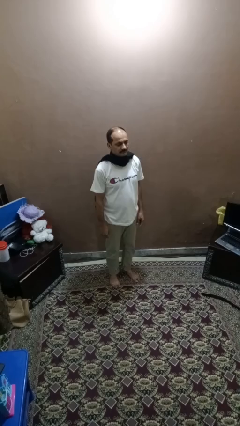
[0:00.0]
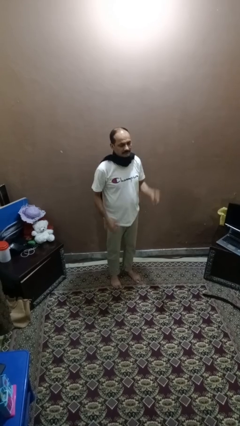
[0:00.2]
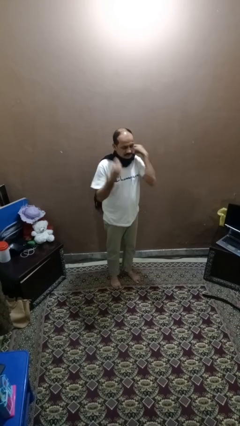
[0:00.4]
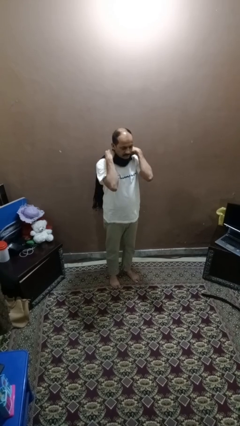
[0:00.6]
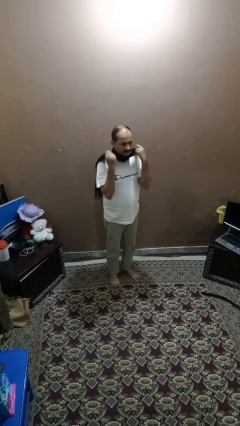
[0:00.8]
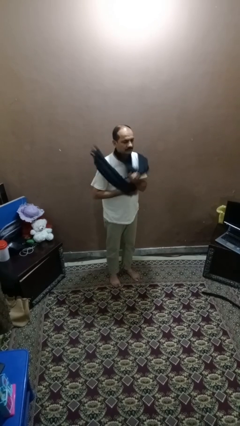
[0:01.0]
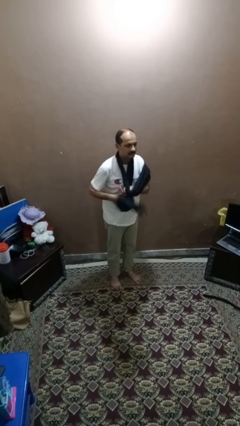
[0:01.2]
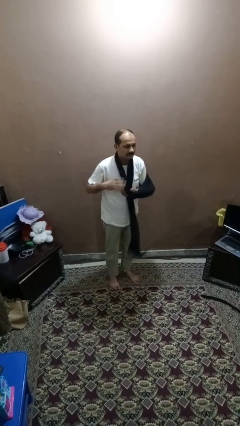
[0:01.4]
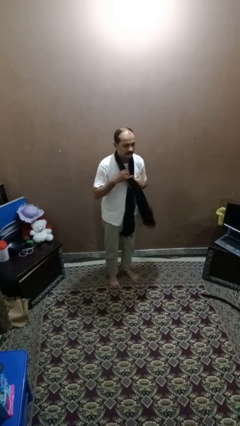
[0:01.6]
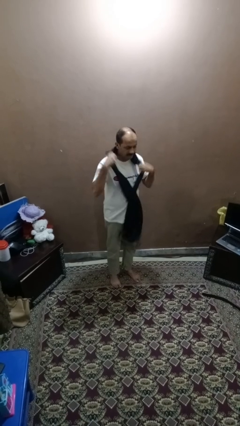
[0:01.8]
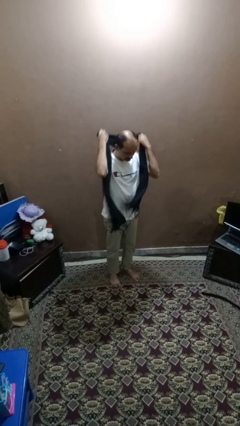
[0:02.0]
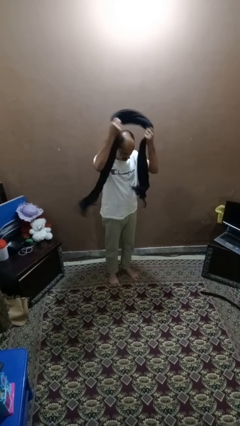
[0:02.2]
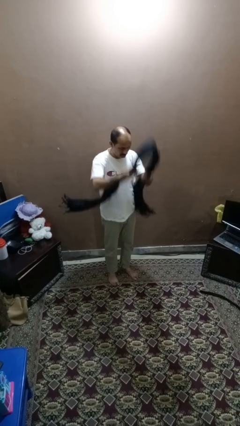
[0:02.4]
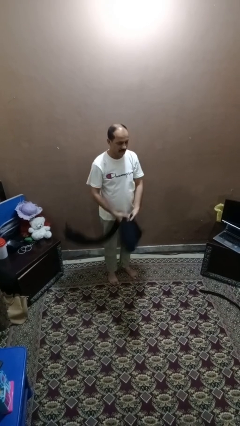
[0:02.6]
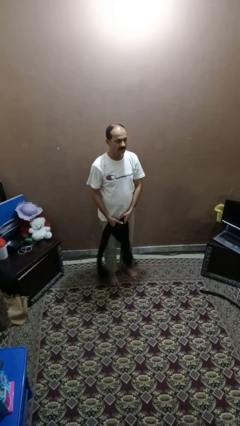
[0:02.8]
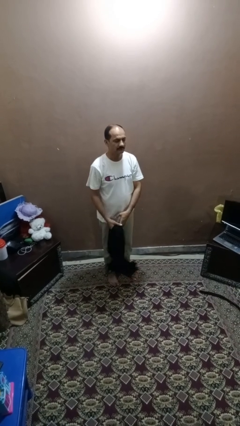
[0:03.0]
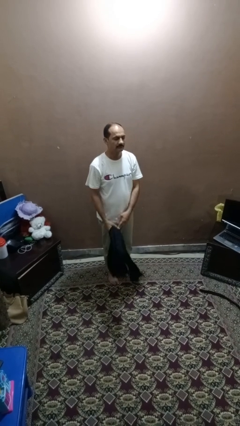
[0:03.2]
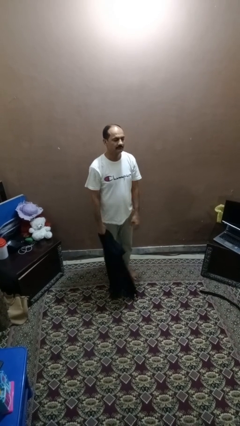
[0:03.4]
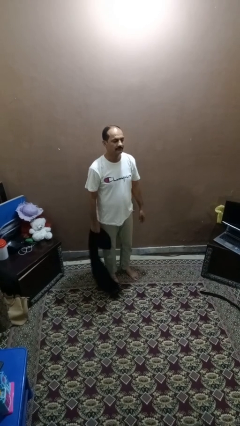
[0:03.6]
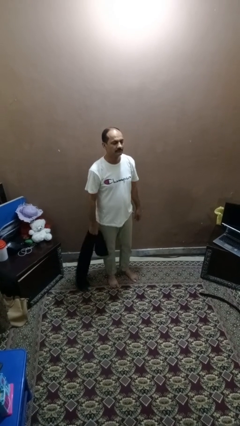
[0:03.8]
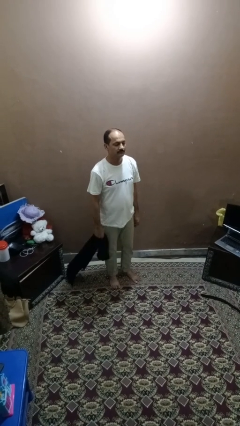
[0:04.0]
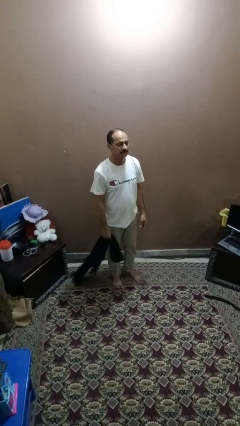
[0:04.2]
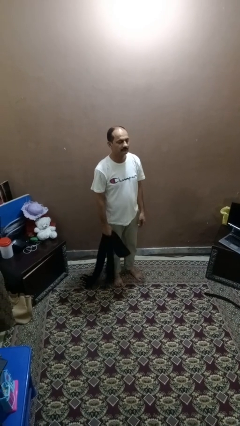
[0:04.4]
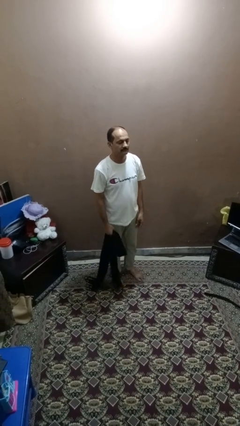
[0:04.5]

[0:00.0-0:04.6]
person takes off scarf

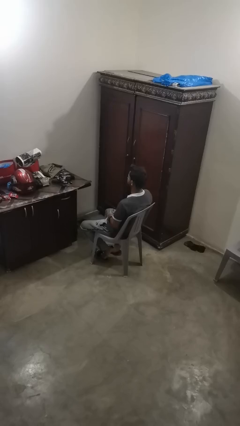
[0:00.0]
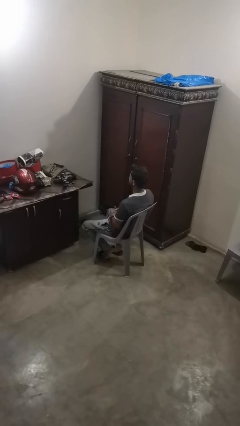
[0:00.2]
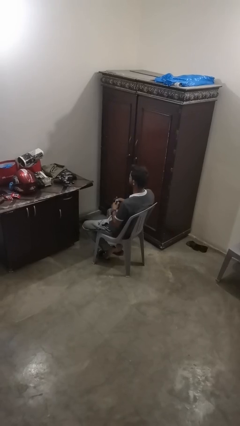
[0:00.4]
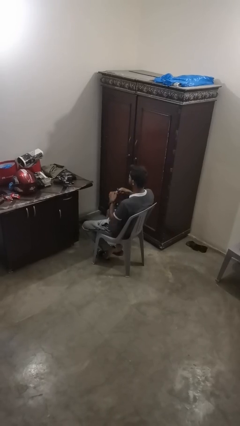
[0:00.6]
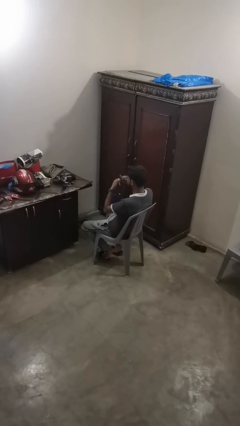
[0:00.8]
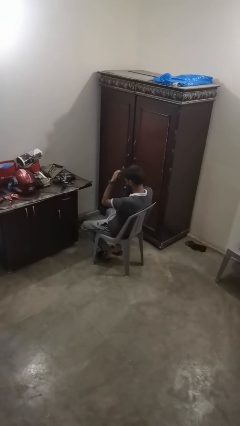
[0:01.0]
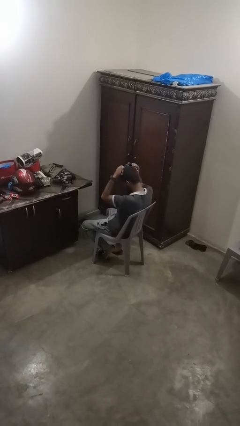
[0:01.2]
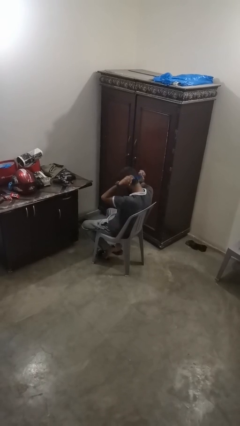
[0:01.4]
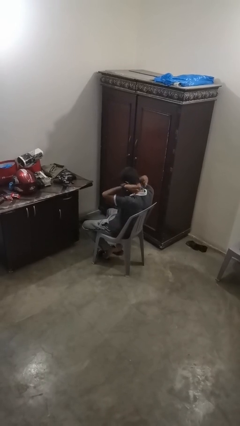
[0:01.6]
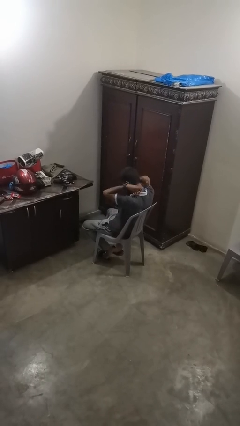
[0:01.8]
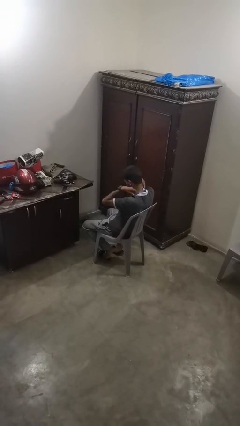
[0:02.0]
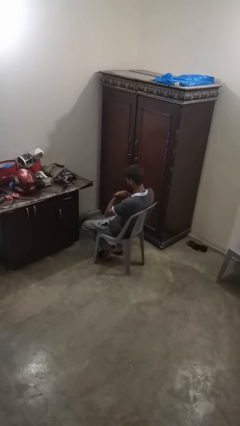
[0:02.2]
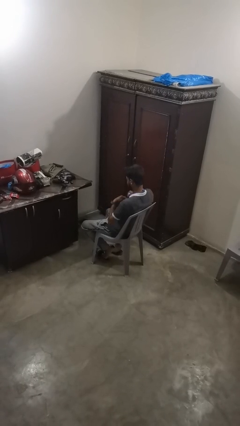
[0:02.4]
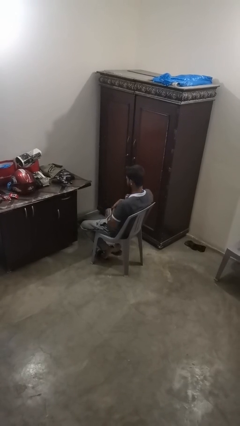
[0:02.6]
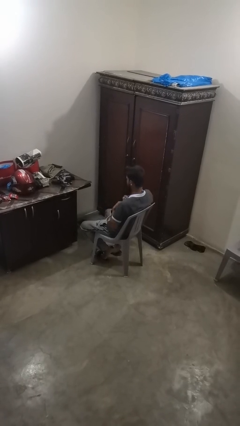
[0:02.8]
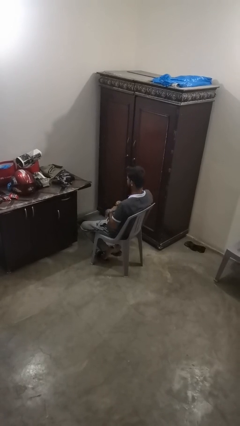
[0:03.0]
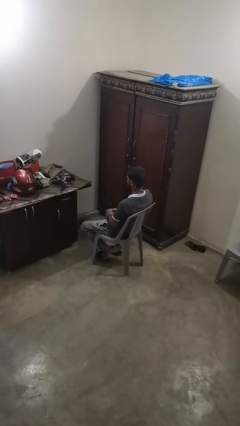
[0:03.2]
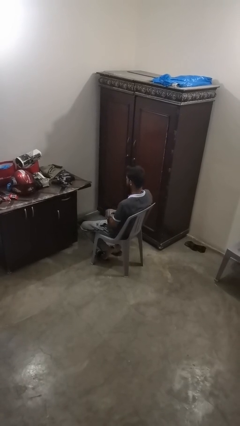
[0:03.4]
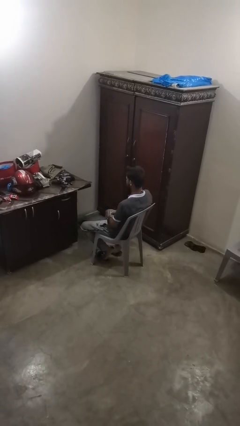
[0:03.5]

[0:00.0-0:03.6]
person puts on necklace

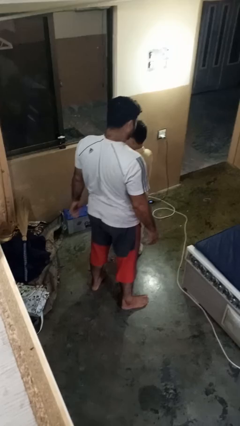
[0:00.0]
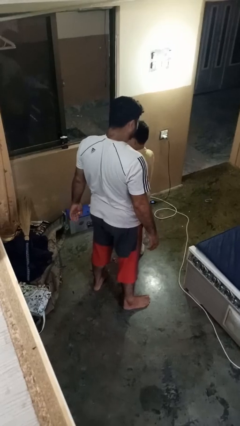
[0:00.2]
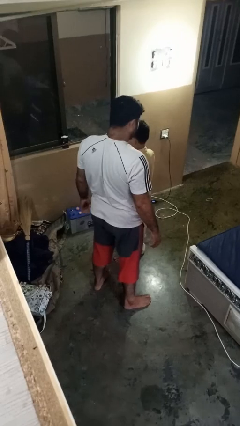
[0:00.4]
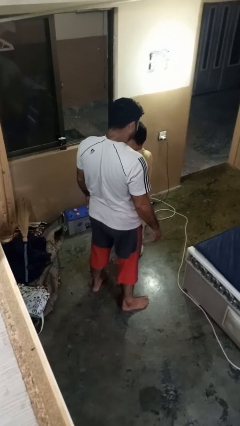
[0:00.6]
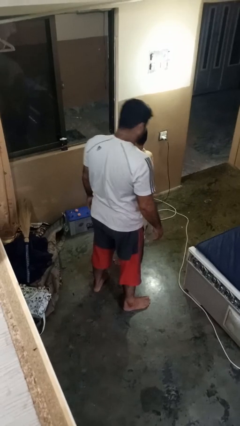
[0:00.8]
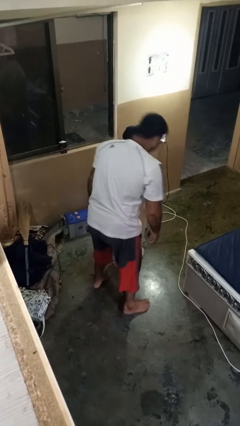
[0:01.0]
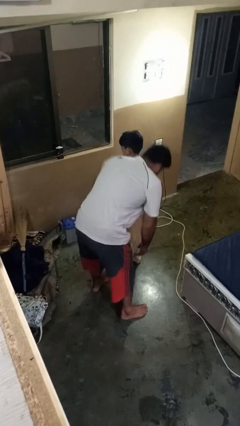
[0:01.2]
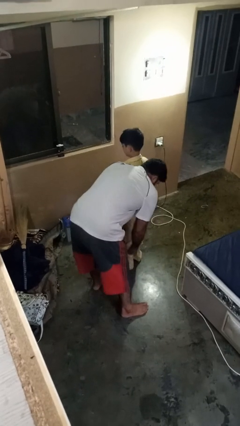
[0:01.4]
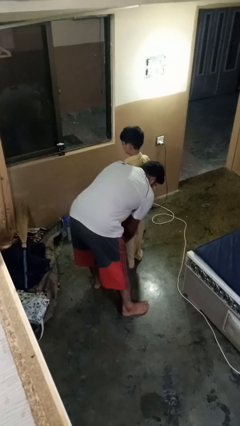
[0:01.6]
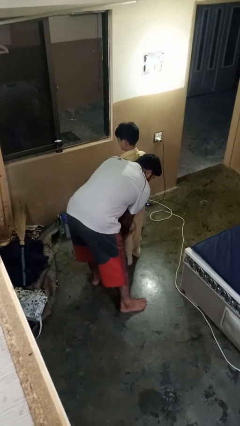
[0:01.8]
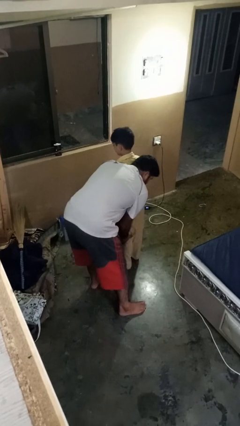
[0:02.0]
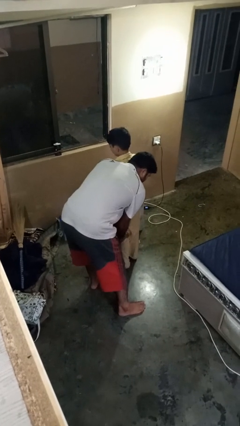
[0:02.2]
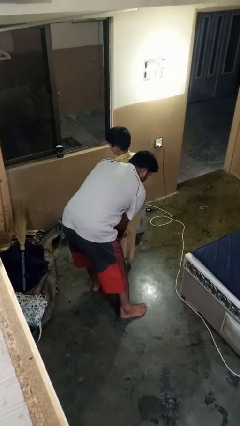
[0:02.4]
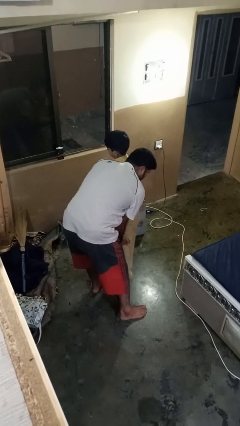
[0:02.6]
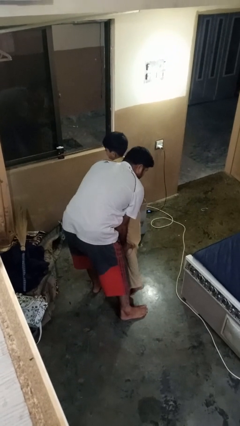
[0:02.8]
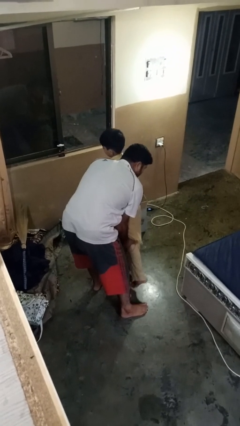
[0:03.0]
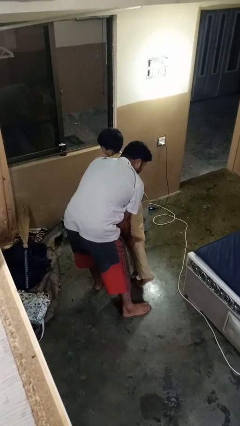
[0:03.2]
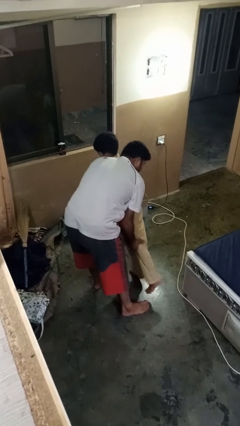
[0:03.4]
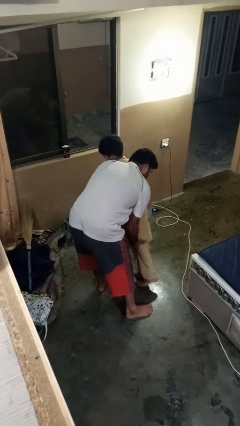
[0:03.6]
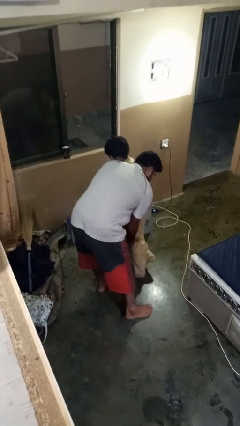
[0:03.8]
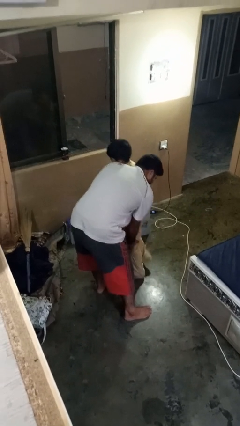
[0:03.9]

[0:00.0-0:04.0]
person picks up person

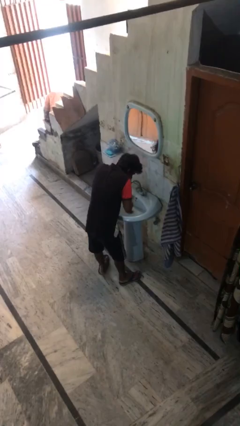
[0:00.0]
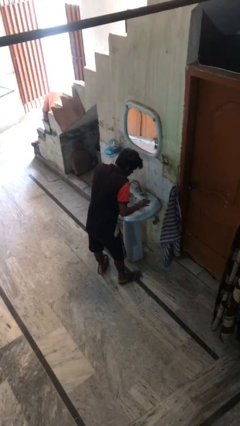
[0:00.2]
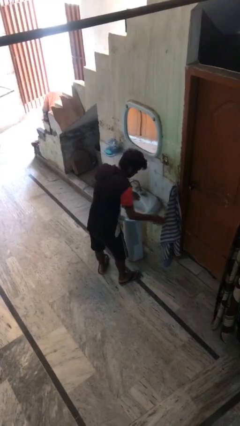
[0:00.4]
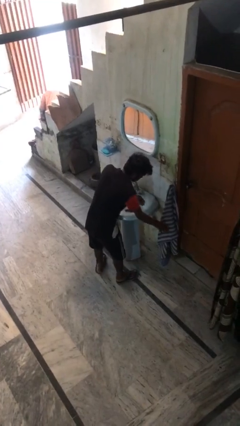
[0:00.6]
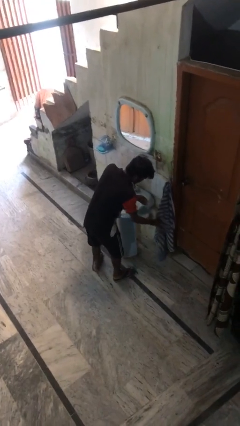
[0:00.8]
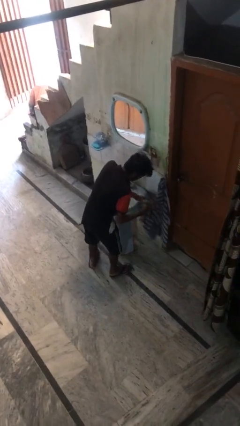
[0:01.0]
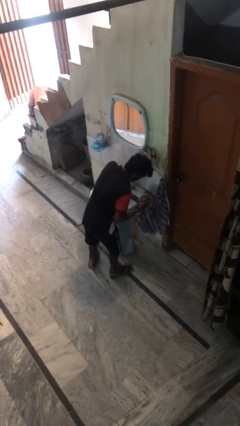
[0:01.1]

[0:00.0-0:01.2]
person dries face with towel

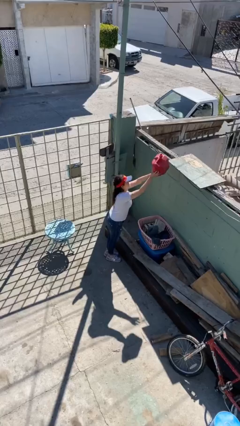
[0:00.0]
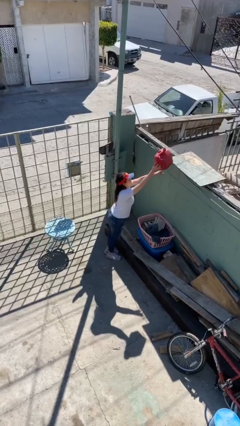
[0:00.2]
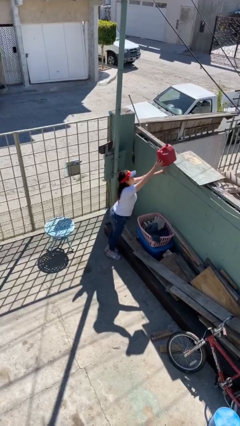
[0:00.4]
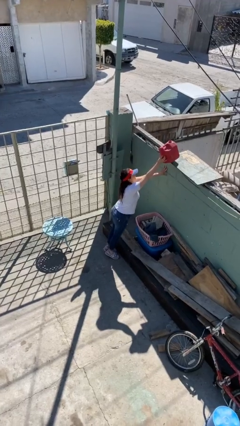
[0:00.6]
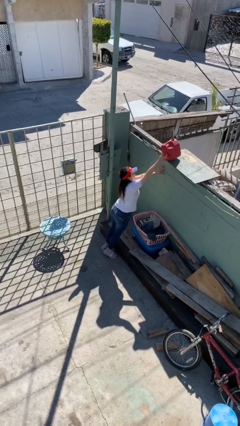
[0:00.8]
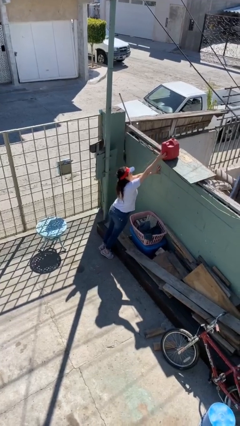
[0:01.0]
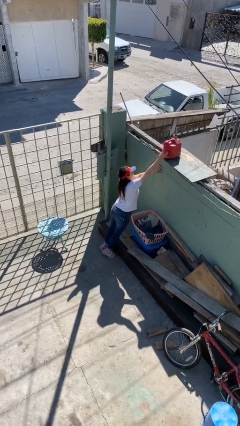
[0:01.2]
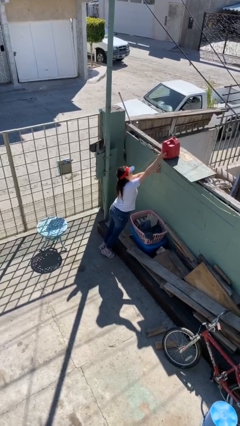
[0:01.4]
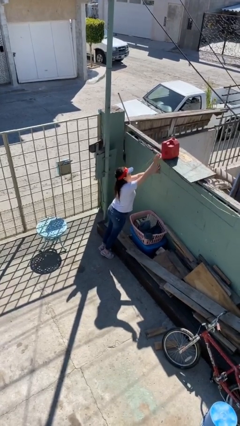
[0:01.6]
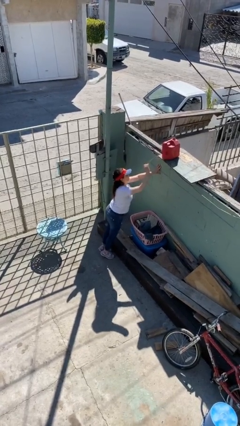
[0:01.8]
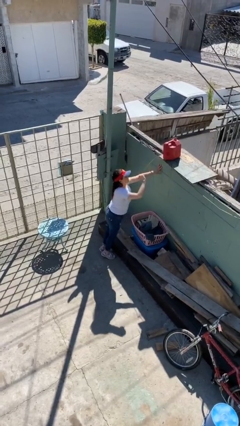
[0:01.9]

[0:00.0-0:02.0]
person puts down object on shelf

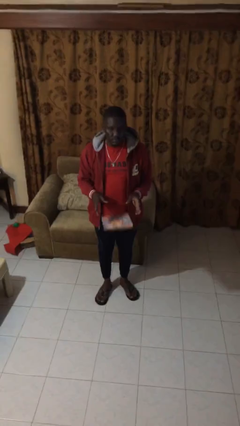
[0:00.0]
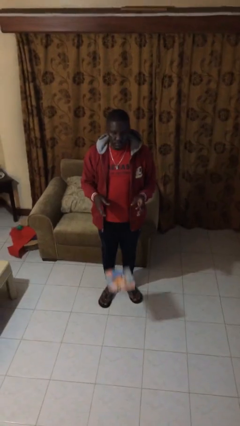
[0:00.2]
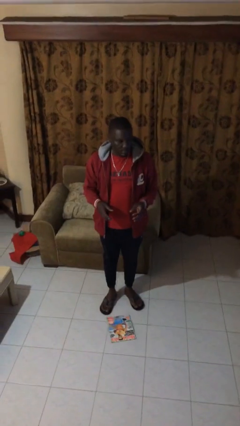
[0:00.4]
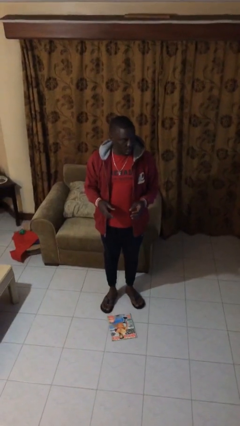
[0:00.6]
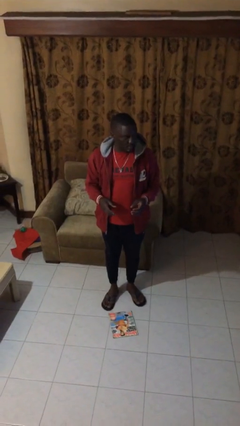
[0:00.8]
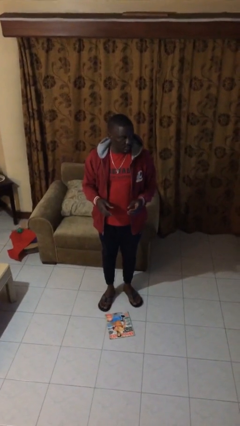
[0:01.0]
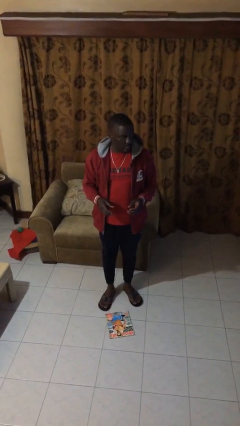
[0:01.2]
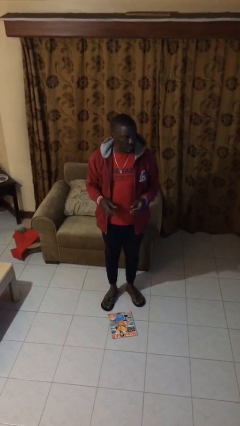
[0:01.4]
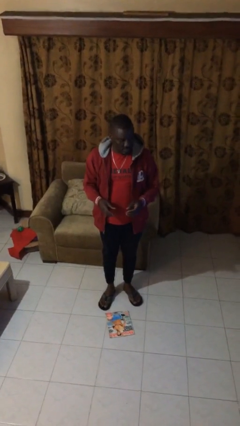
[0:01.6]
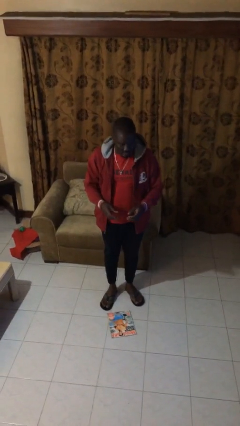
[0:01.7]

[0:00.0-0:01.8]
person drops object
